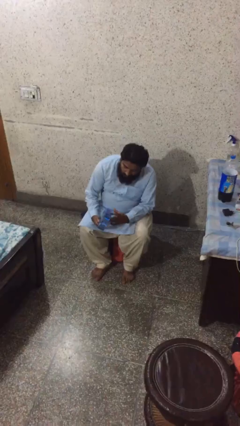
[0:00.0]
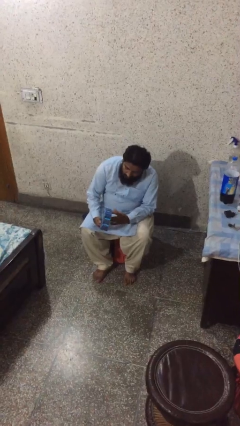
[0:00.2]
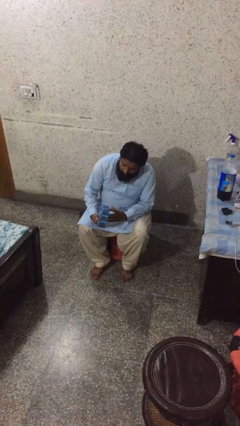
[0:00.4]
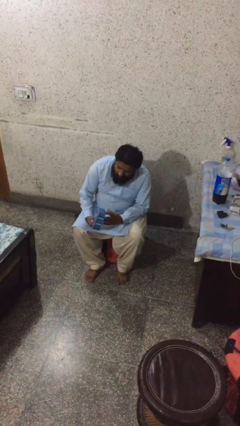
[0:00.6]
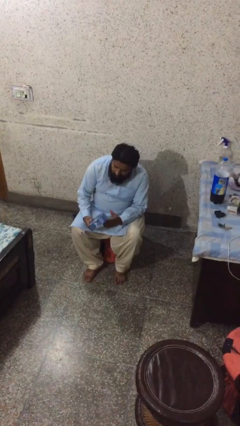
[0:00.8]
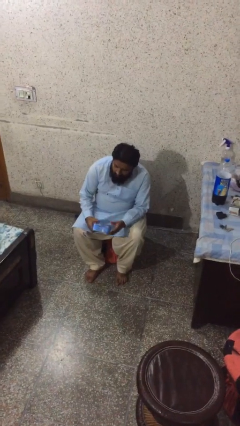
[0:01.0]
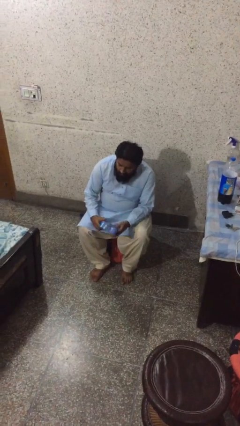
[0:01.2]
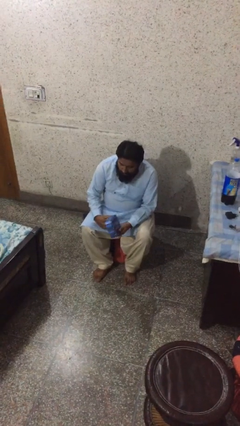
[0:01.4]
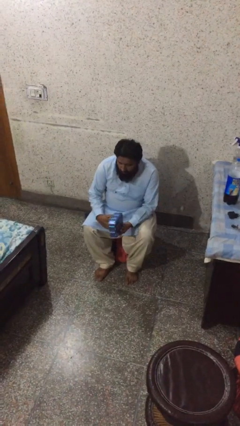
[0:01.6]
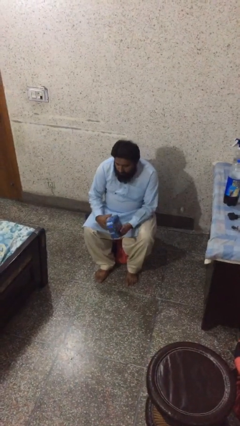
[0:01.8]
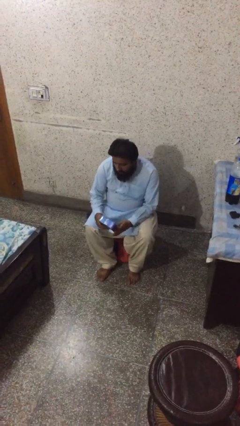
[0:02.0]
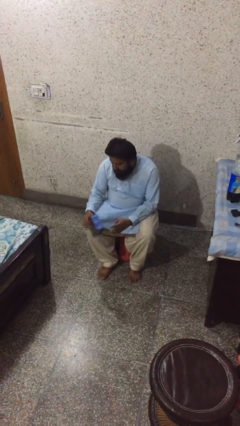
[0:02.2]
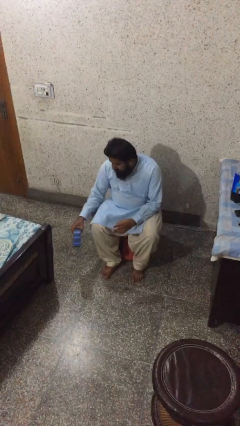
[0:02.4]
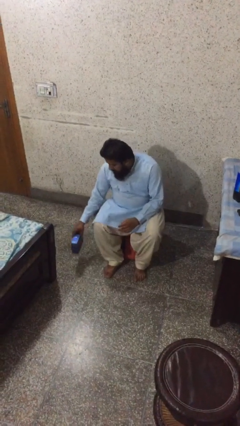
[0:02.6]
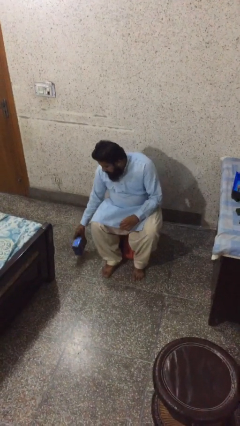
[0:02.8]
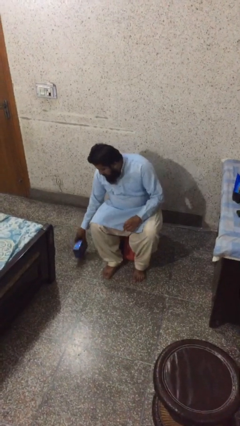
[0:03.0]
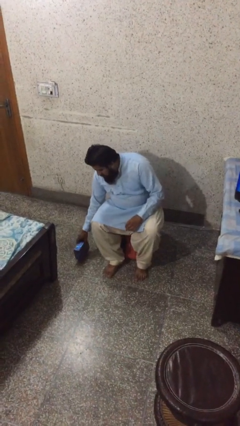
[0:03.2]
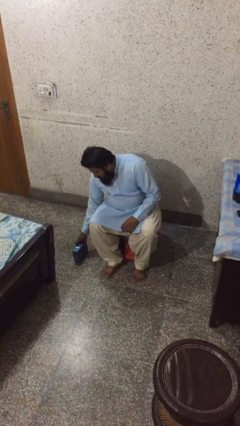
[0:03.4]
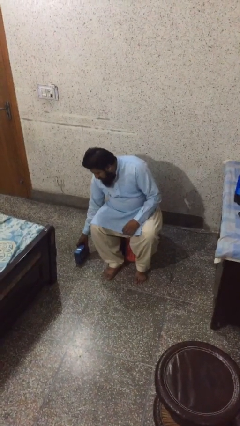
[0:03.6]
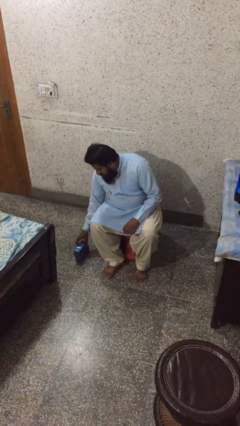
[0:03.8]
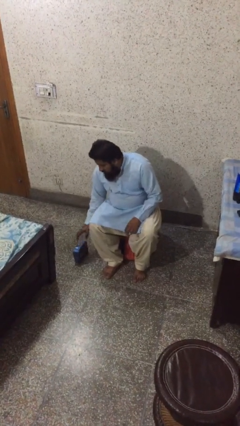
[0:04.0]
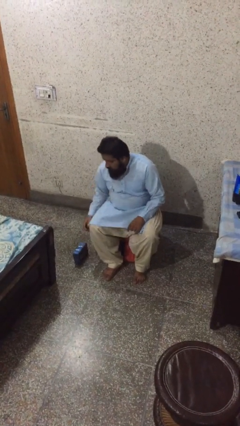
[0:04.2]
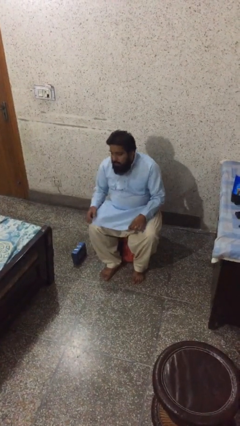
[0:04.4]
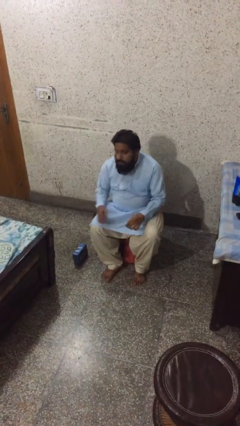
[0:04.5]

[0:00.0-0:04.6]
person puts down object on floor

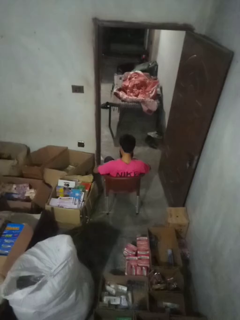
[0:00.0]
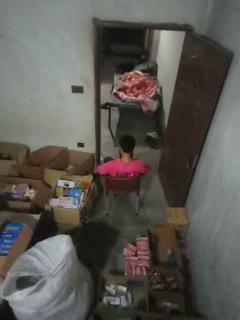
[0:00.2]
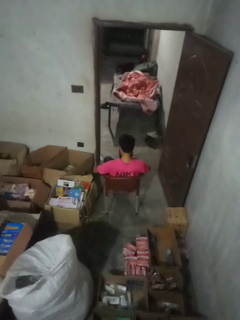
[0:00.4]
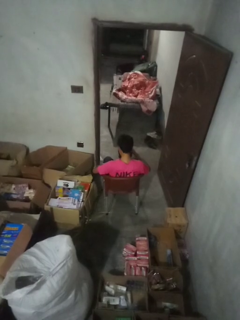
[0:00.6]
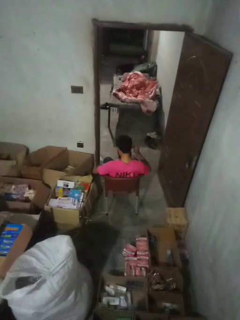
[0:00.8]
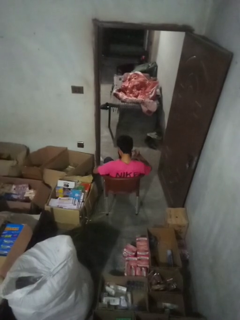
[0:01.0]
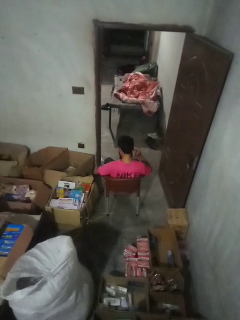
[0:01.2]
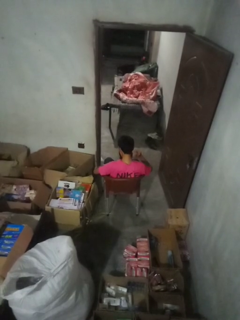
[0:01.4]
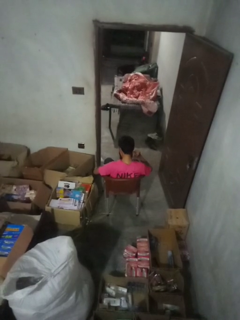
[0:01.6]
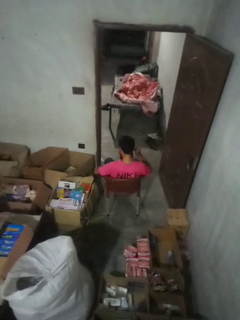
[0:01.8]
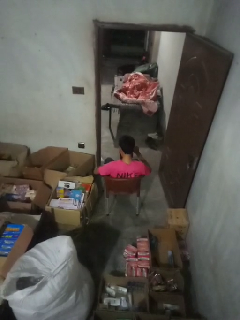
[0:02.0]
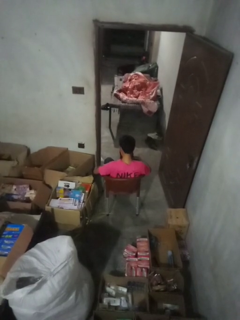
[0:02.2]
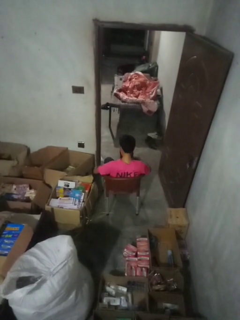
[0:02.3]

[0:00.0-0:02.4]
person touches earlobe

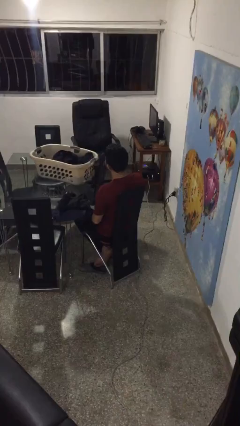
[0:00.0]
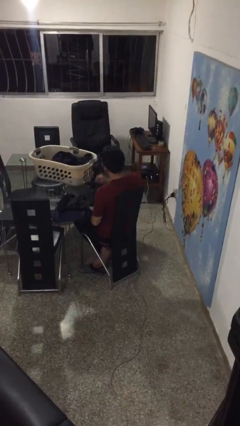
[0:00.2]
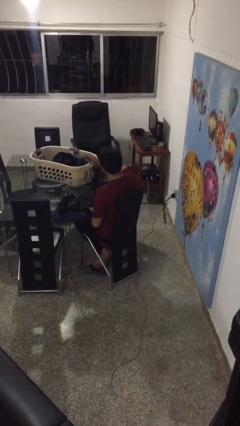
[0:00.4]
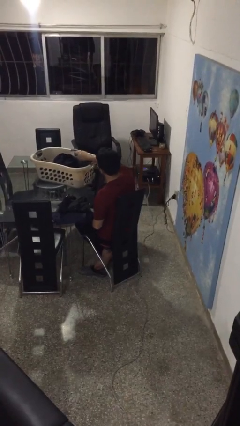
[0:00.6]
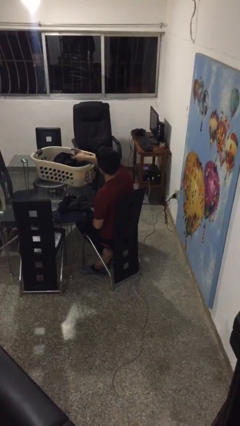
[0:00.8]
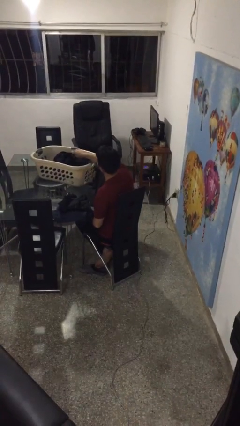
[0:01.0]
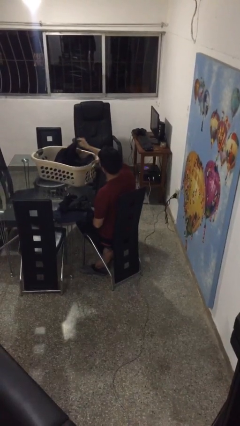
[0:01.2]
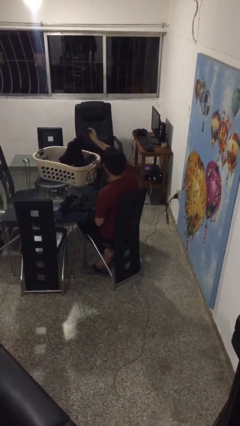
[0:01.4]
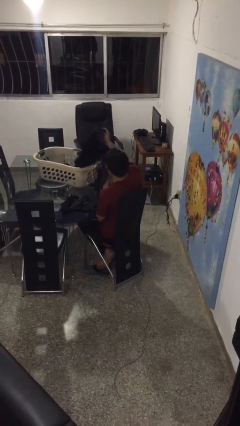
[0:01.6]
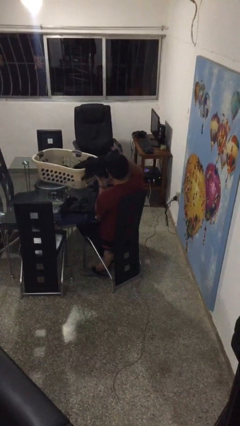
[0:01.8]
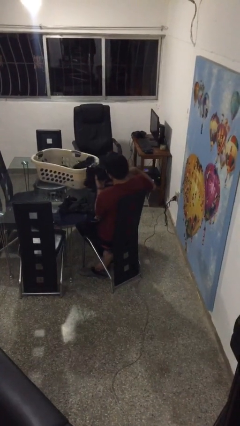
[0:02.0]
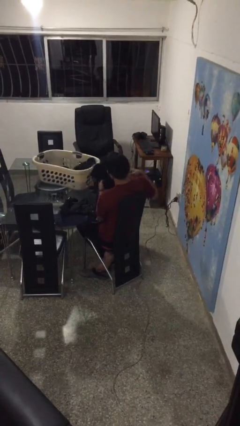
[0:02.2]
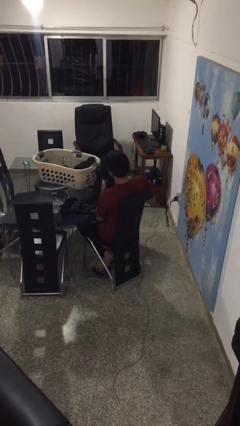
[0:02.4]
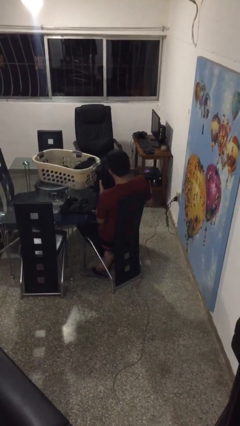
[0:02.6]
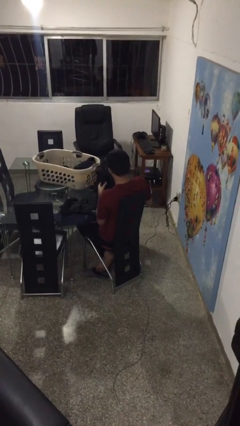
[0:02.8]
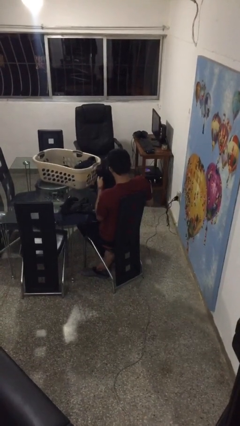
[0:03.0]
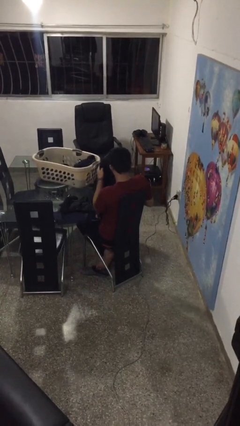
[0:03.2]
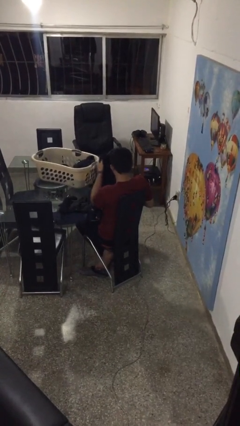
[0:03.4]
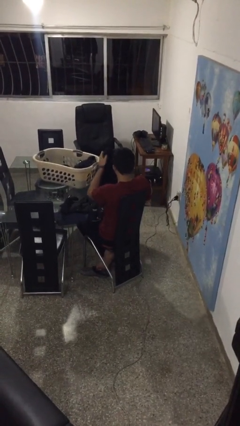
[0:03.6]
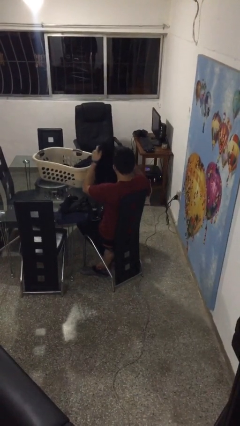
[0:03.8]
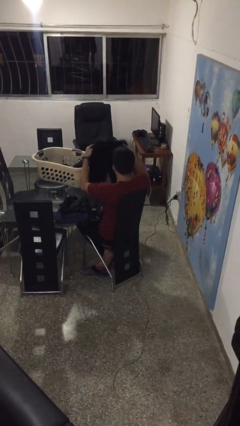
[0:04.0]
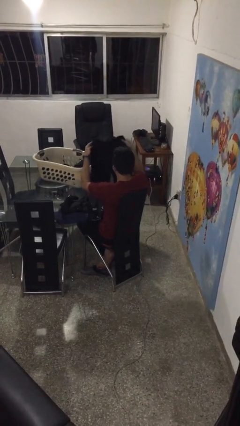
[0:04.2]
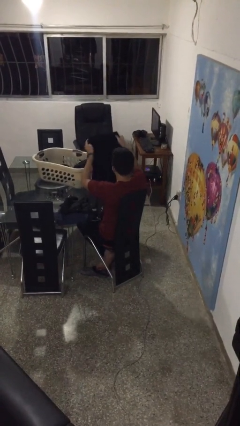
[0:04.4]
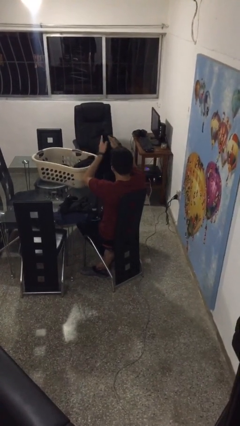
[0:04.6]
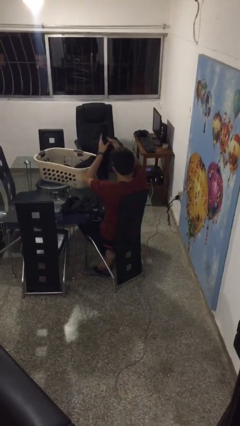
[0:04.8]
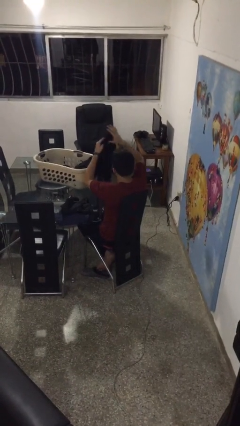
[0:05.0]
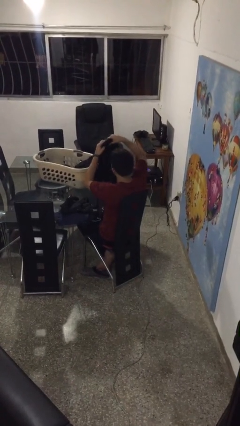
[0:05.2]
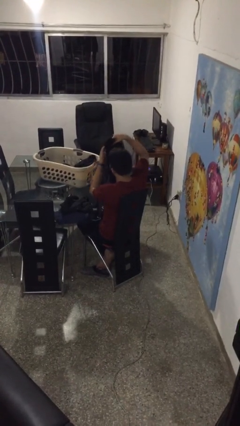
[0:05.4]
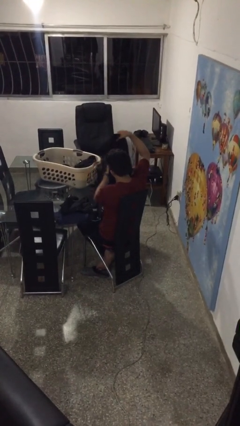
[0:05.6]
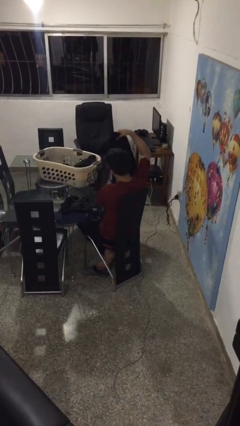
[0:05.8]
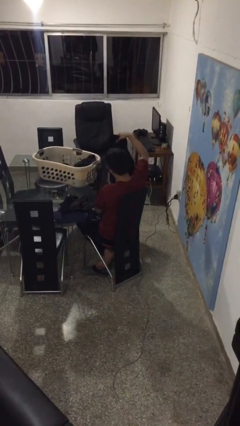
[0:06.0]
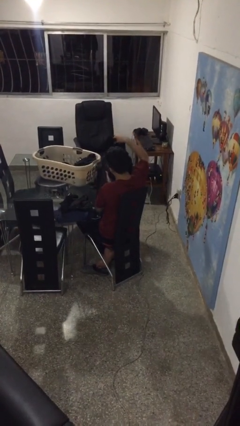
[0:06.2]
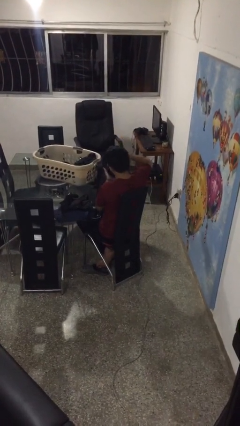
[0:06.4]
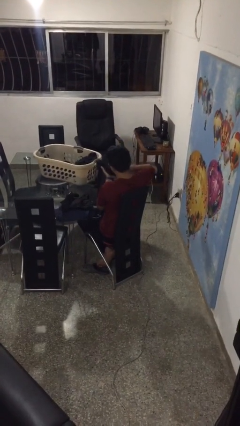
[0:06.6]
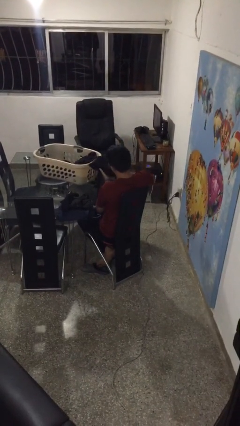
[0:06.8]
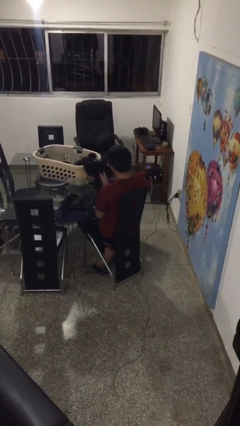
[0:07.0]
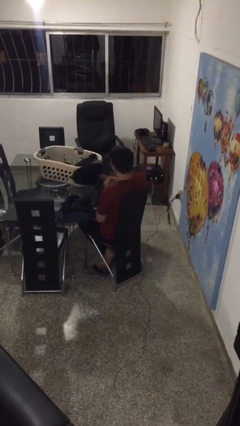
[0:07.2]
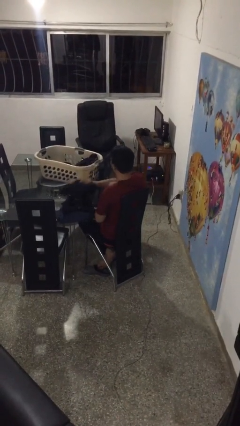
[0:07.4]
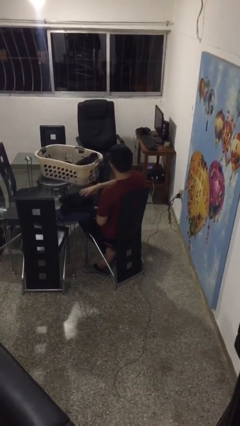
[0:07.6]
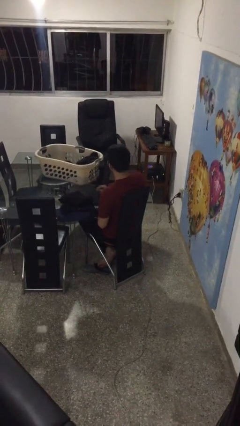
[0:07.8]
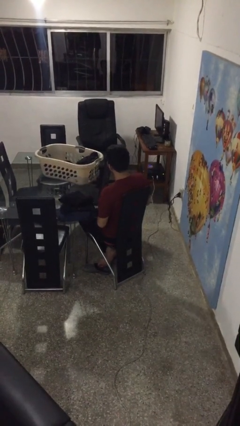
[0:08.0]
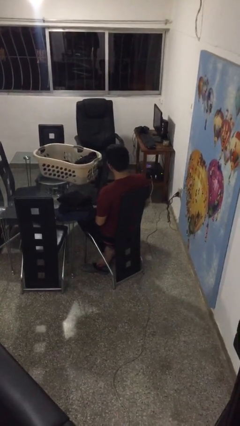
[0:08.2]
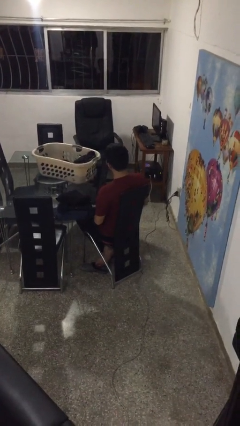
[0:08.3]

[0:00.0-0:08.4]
person folds pants

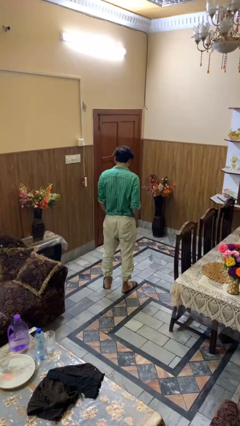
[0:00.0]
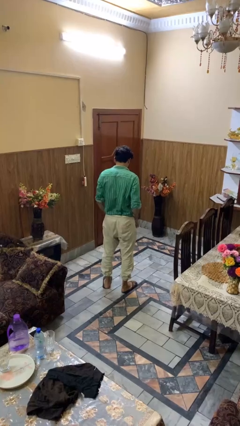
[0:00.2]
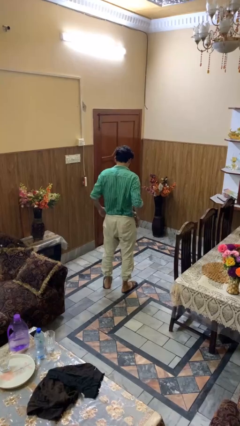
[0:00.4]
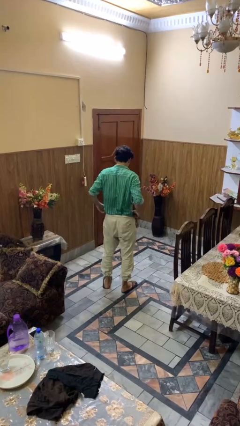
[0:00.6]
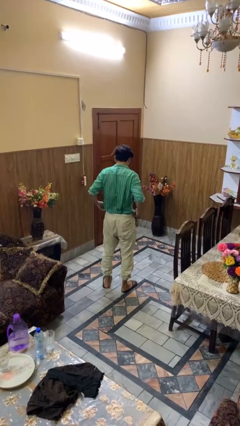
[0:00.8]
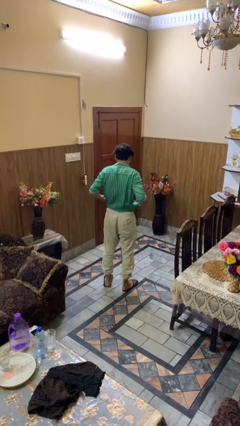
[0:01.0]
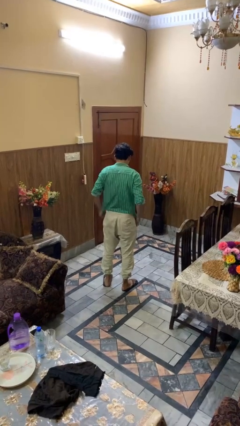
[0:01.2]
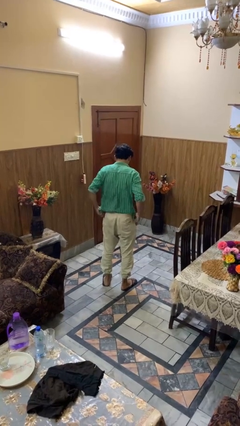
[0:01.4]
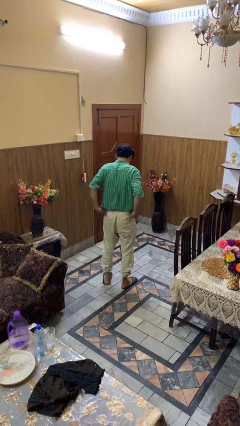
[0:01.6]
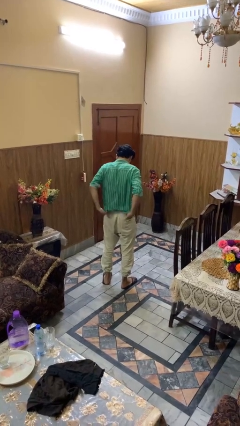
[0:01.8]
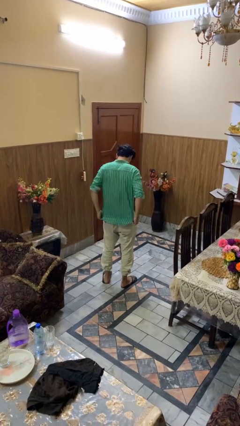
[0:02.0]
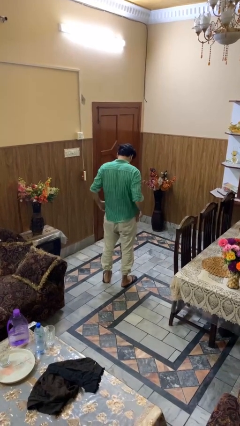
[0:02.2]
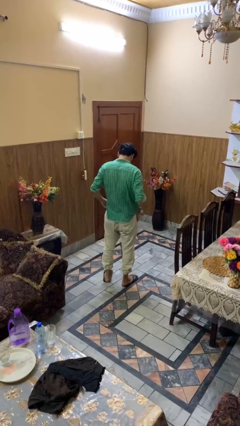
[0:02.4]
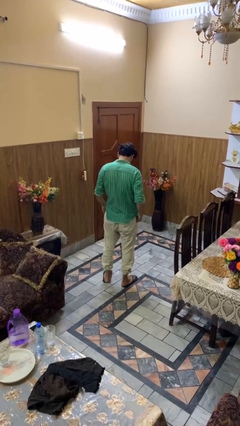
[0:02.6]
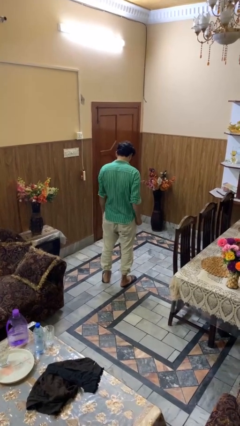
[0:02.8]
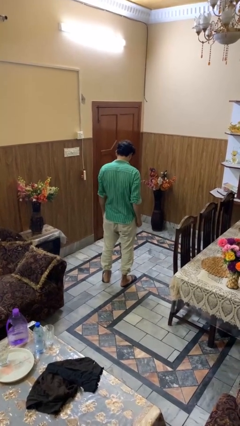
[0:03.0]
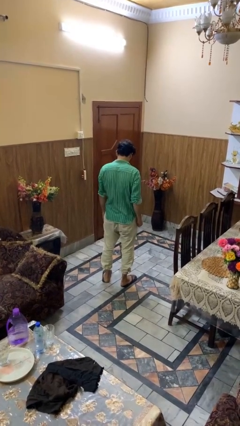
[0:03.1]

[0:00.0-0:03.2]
person untucks shirt
